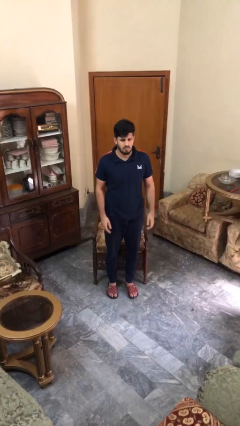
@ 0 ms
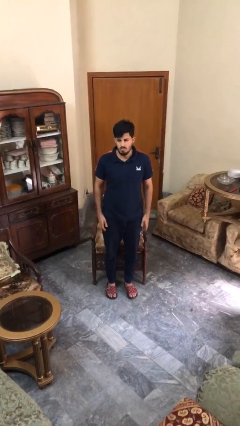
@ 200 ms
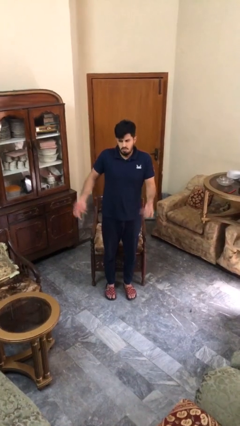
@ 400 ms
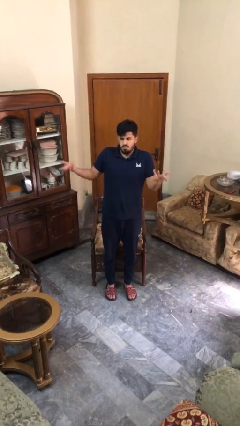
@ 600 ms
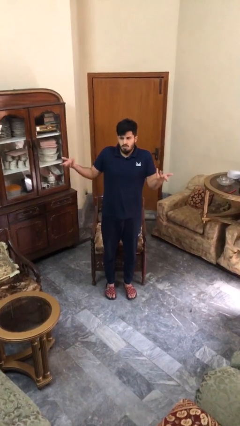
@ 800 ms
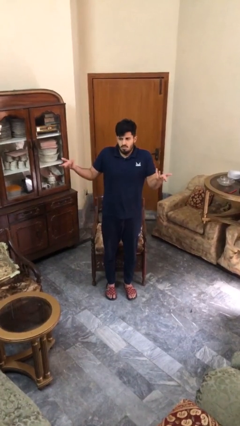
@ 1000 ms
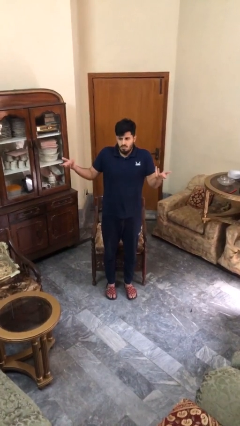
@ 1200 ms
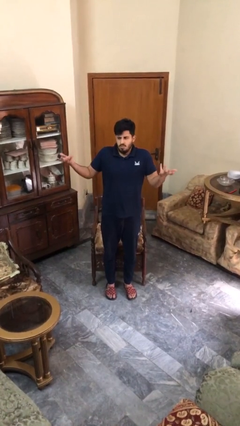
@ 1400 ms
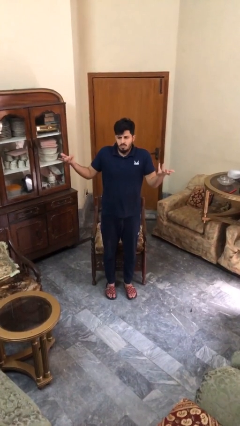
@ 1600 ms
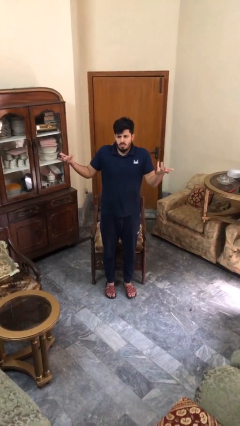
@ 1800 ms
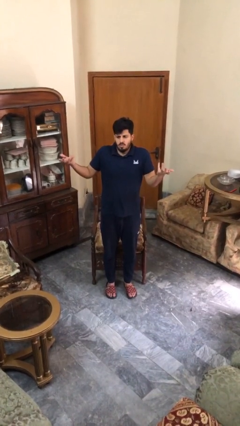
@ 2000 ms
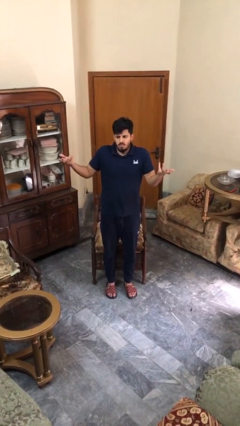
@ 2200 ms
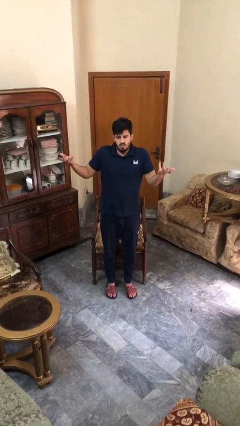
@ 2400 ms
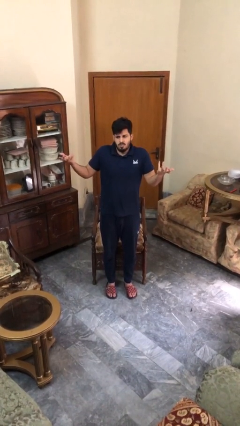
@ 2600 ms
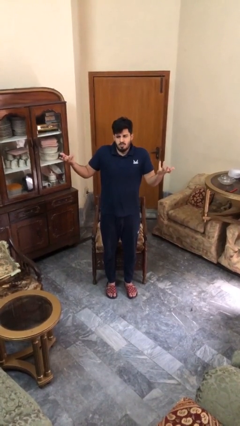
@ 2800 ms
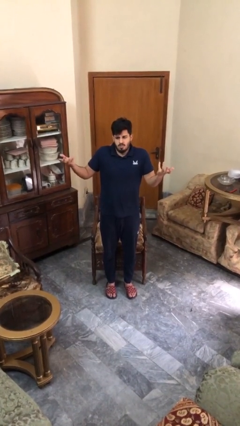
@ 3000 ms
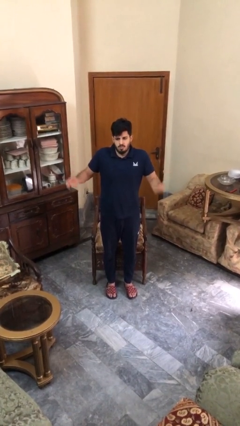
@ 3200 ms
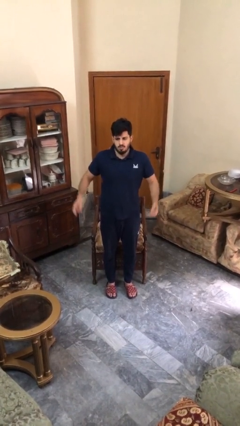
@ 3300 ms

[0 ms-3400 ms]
person shrugs

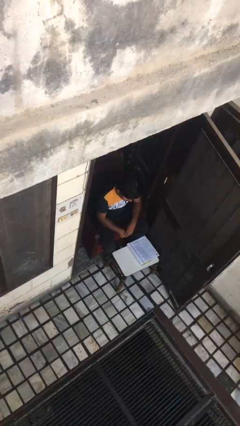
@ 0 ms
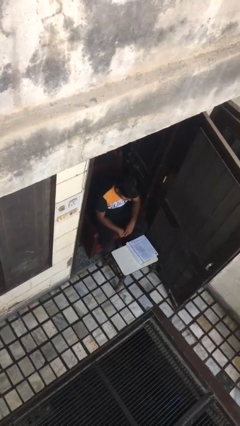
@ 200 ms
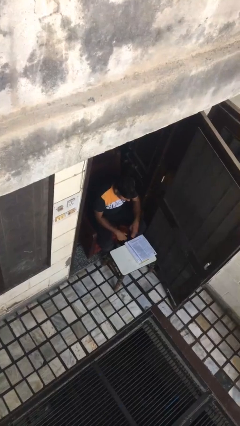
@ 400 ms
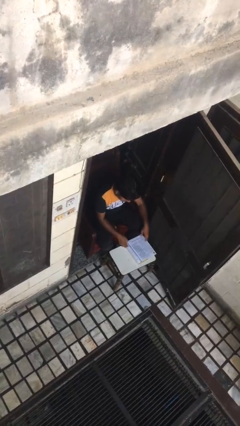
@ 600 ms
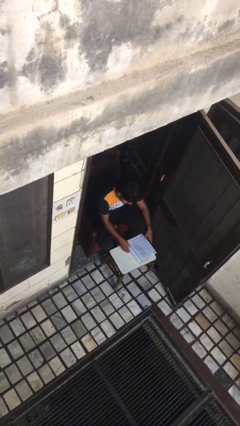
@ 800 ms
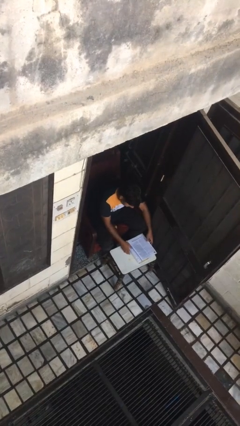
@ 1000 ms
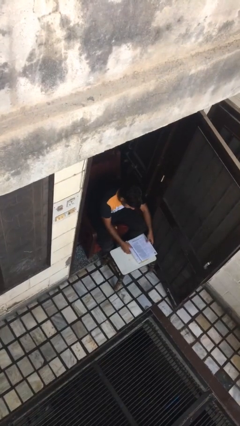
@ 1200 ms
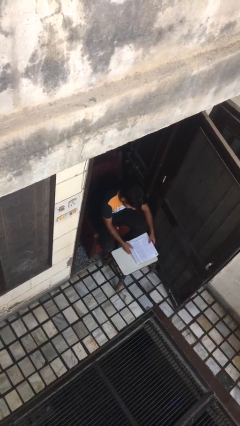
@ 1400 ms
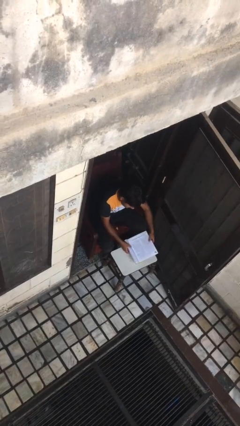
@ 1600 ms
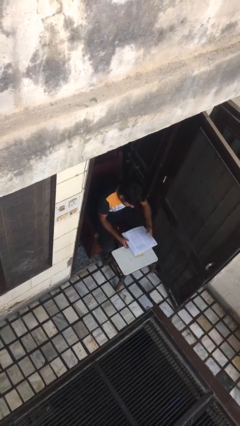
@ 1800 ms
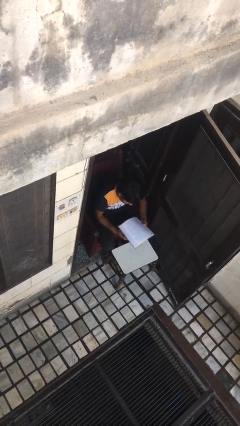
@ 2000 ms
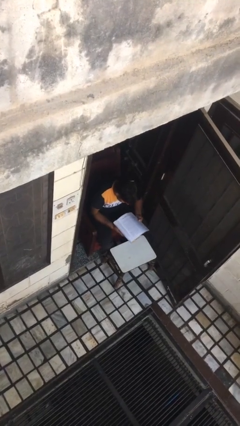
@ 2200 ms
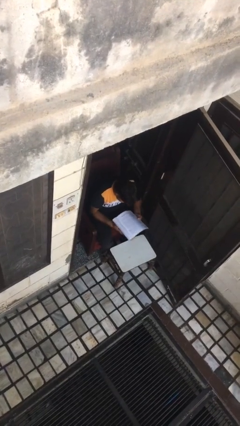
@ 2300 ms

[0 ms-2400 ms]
person picks up object from table

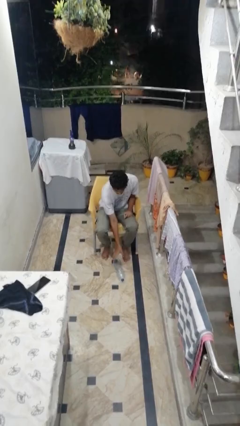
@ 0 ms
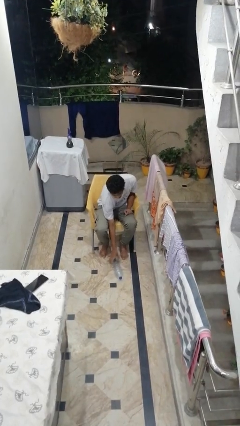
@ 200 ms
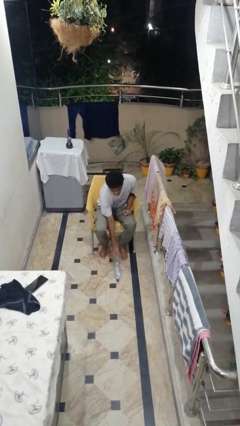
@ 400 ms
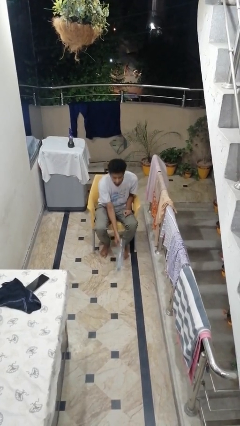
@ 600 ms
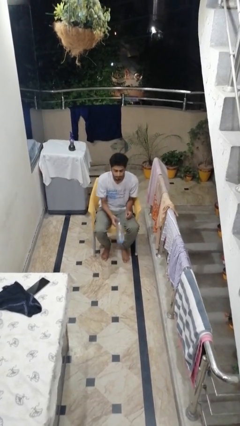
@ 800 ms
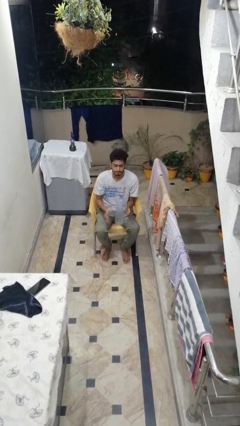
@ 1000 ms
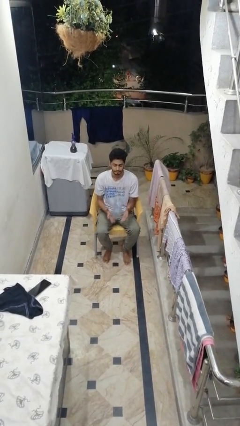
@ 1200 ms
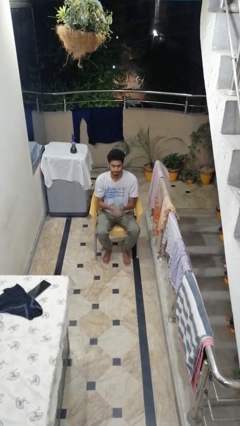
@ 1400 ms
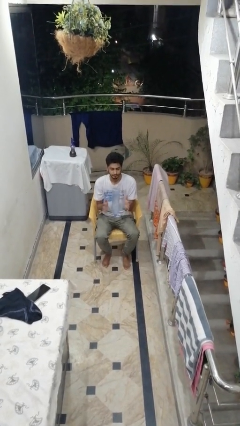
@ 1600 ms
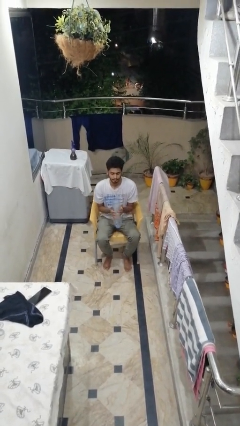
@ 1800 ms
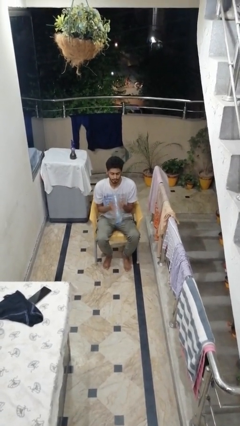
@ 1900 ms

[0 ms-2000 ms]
person picks up object from floor

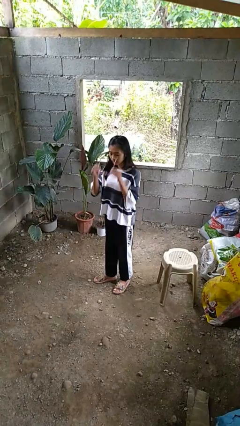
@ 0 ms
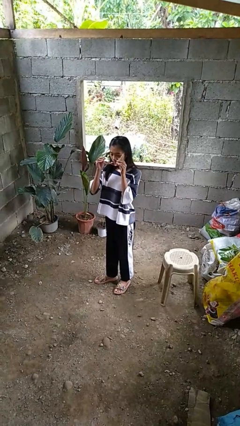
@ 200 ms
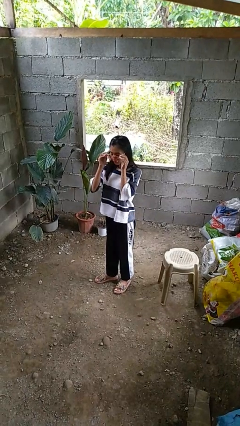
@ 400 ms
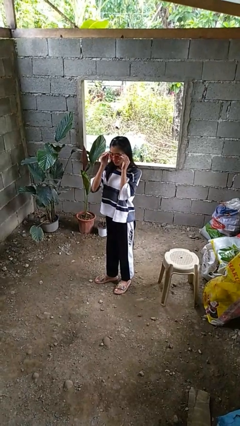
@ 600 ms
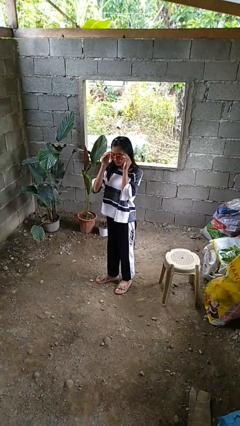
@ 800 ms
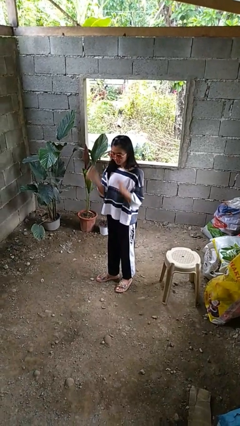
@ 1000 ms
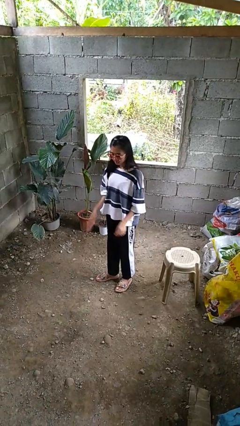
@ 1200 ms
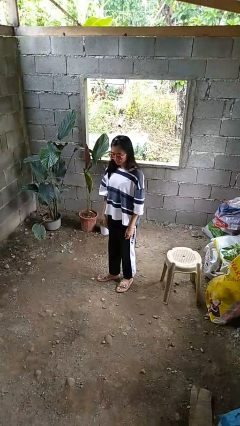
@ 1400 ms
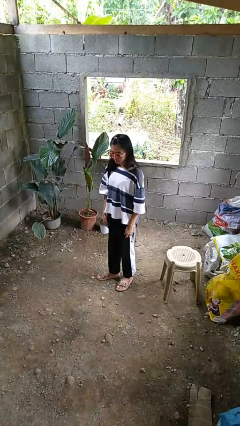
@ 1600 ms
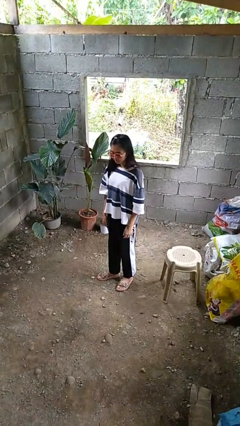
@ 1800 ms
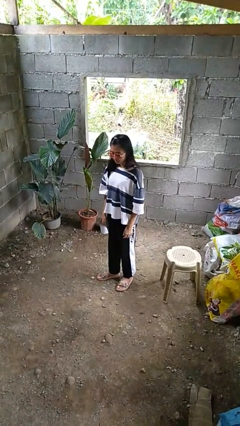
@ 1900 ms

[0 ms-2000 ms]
person puts on sunglasses

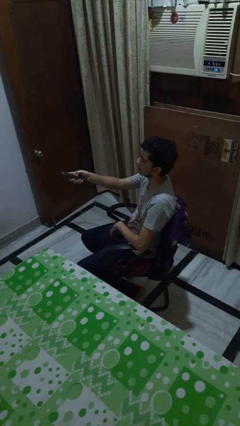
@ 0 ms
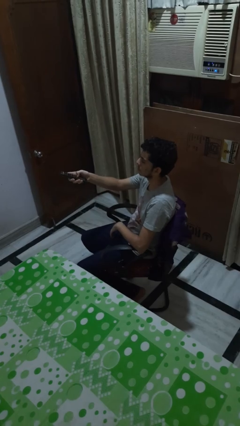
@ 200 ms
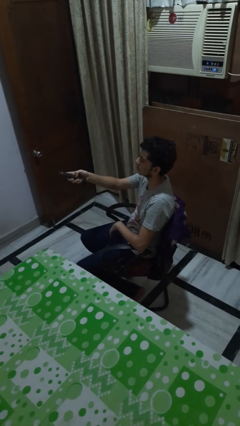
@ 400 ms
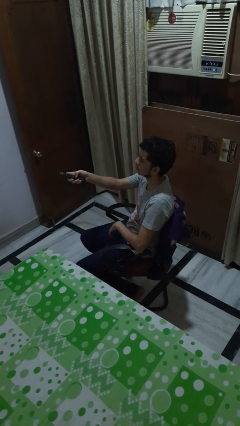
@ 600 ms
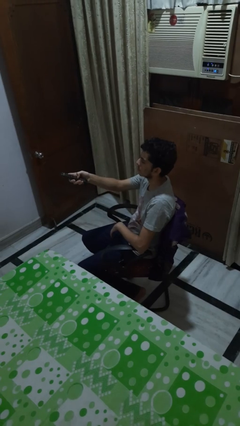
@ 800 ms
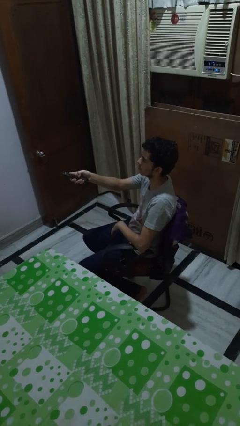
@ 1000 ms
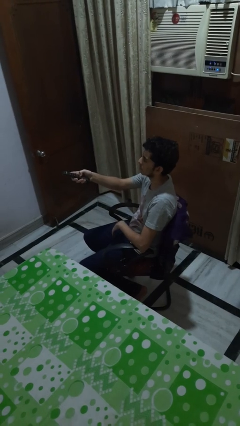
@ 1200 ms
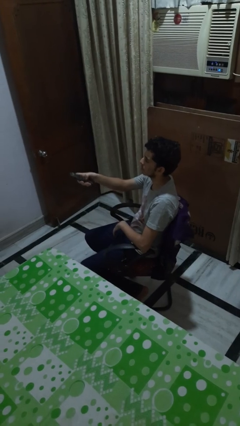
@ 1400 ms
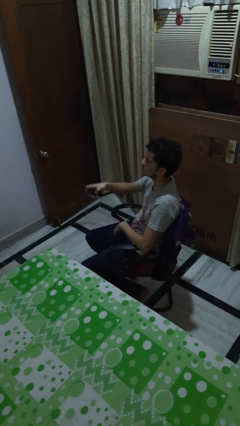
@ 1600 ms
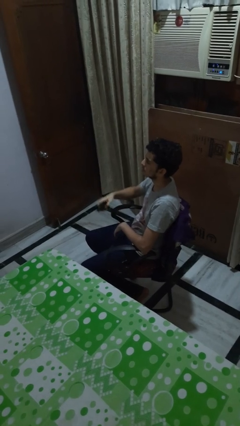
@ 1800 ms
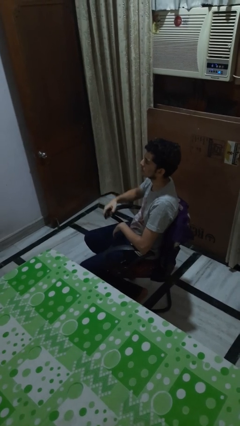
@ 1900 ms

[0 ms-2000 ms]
person uses television remote

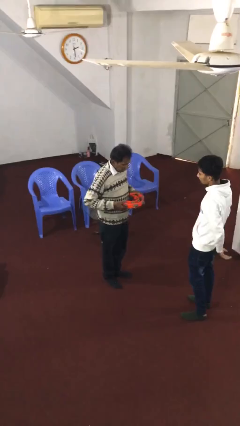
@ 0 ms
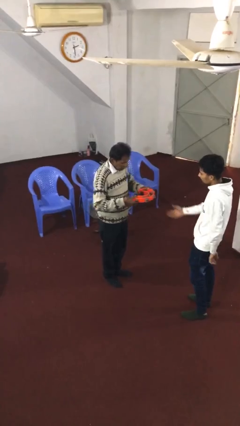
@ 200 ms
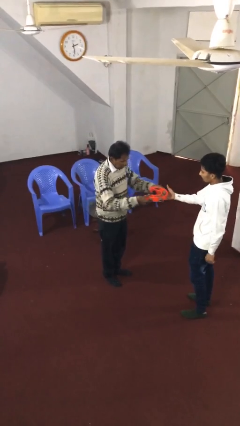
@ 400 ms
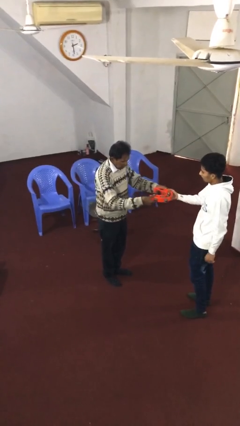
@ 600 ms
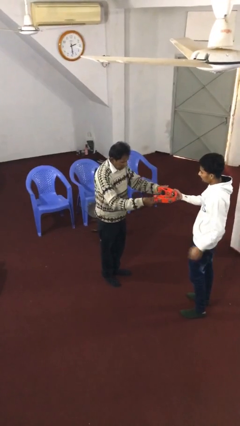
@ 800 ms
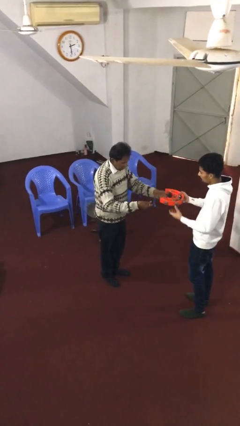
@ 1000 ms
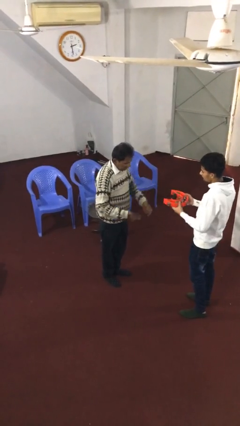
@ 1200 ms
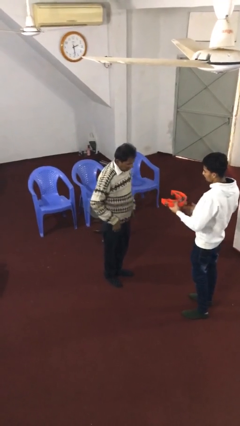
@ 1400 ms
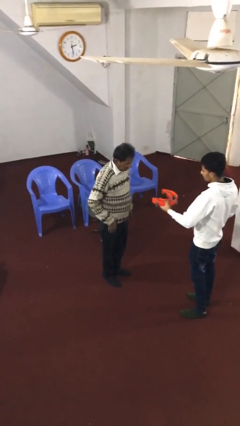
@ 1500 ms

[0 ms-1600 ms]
person transfers object to person

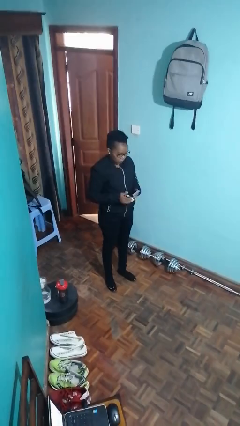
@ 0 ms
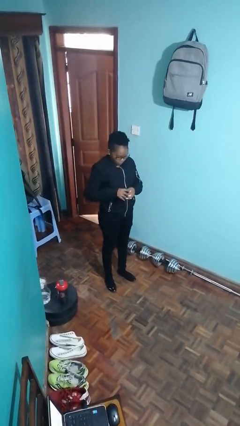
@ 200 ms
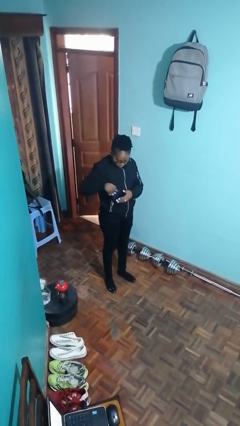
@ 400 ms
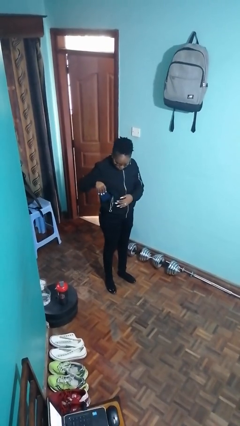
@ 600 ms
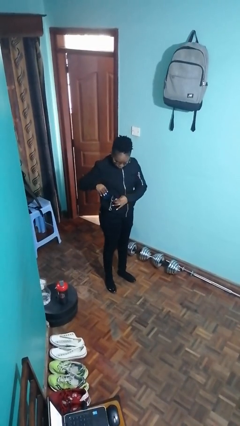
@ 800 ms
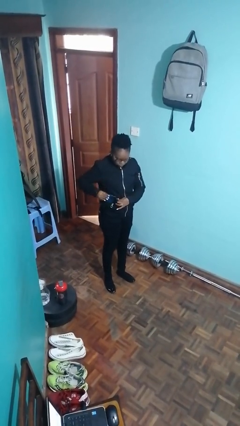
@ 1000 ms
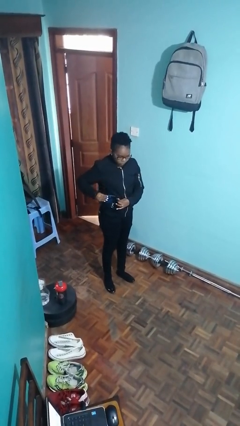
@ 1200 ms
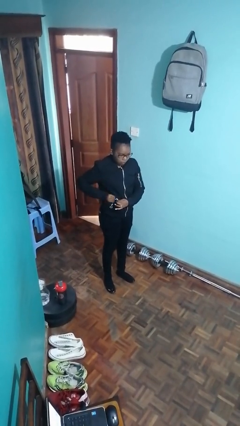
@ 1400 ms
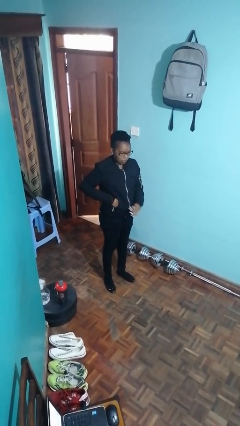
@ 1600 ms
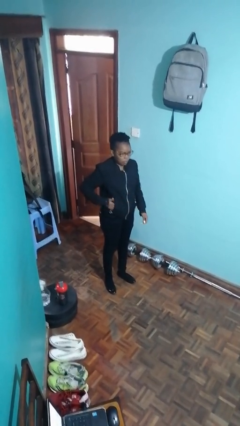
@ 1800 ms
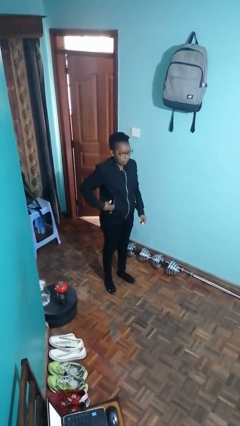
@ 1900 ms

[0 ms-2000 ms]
person puts phone into pocket

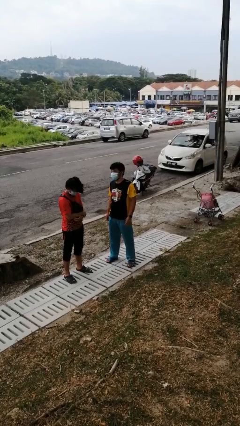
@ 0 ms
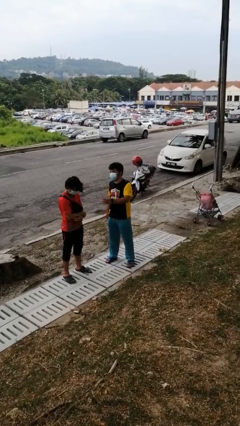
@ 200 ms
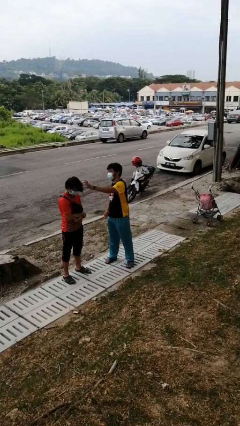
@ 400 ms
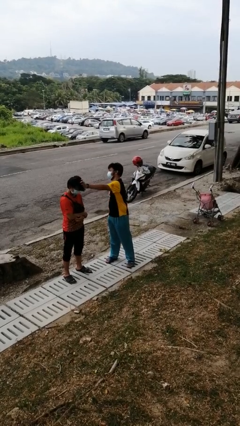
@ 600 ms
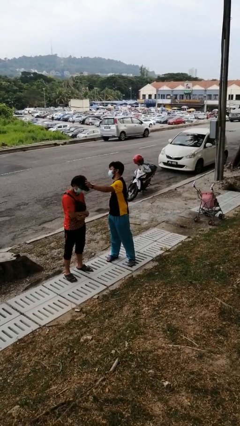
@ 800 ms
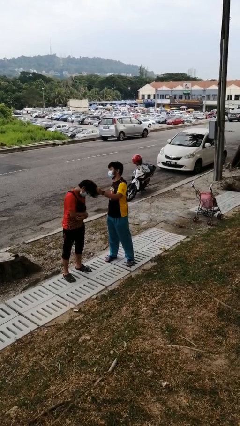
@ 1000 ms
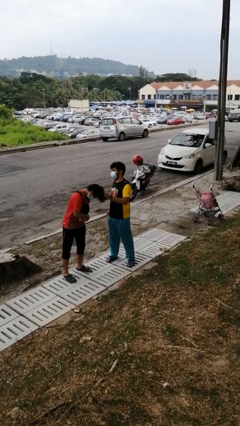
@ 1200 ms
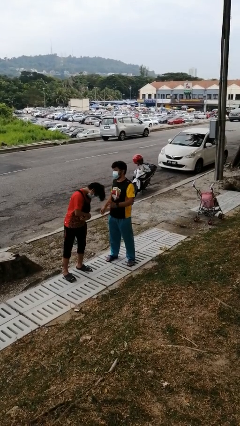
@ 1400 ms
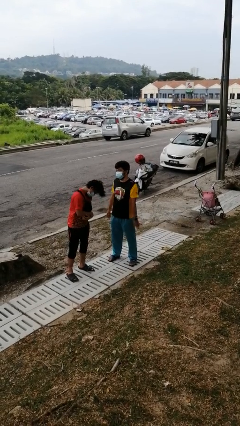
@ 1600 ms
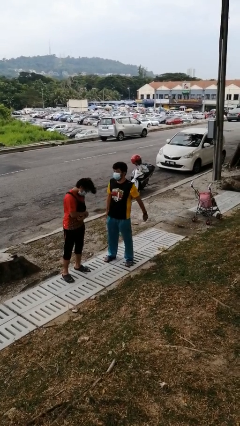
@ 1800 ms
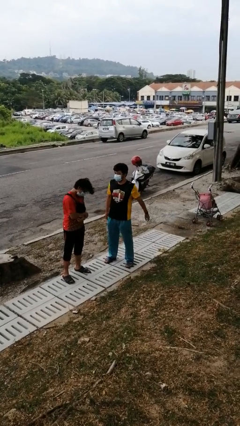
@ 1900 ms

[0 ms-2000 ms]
person grabs person by hair
